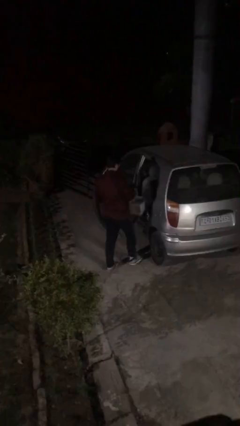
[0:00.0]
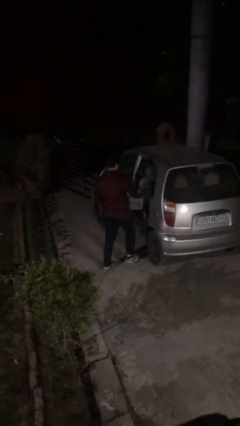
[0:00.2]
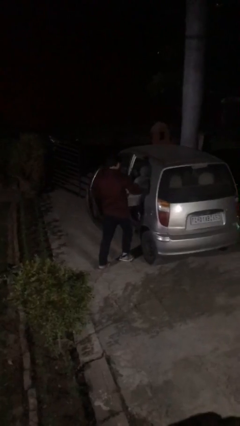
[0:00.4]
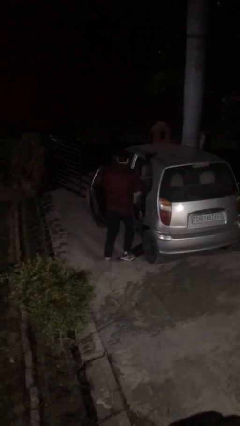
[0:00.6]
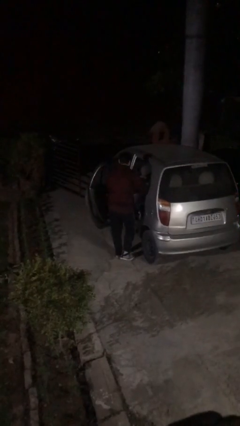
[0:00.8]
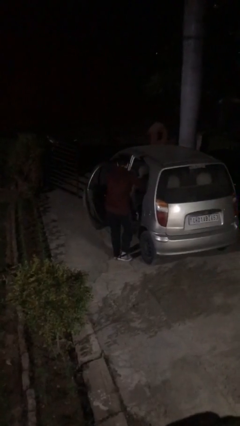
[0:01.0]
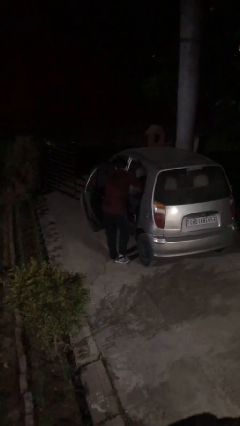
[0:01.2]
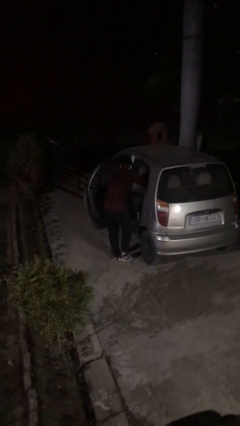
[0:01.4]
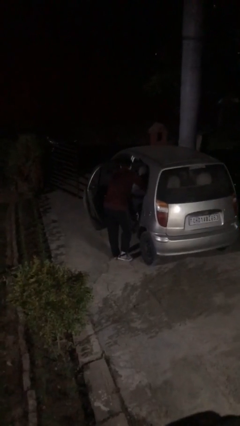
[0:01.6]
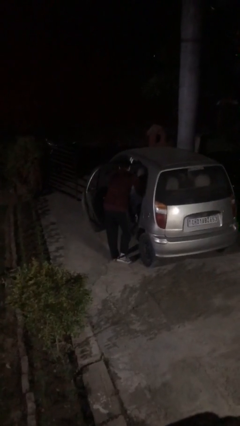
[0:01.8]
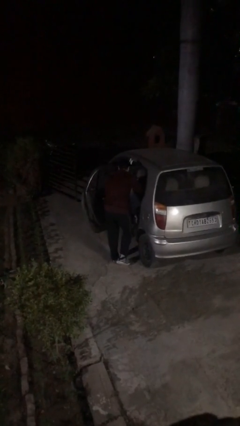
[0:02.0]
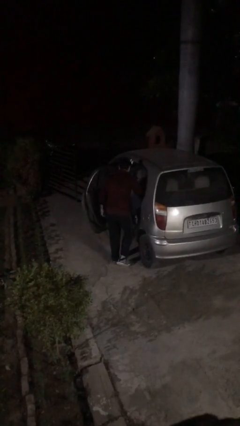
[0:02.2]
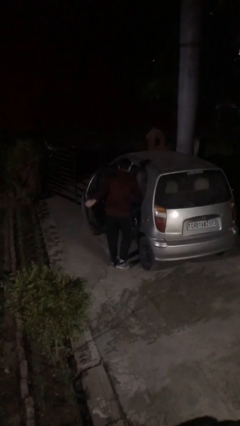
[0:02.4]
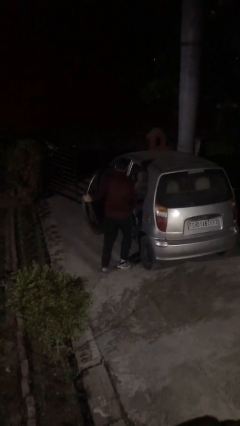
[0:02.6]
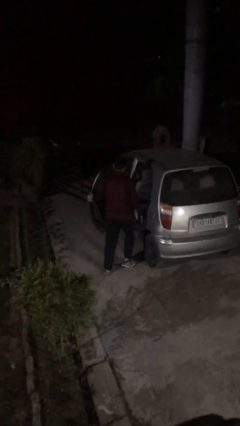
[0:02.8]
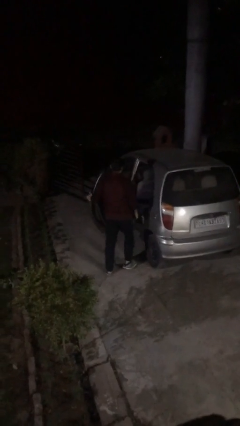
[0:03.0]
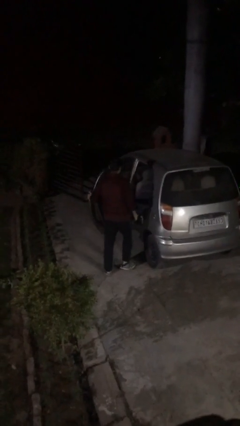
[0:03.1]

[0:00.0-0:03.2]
person loads car

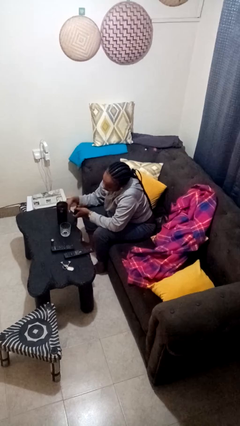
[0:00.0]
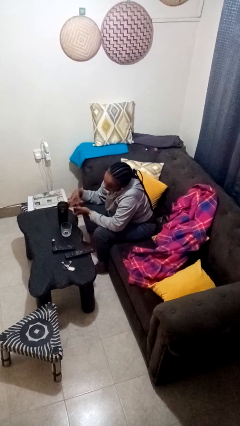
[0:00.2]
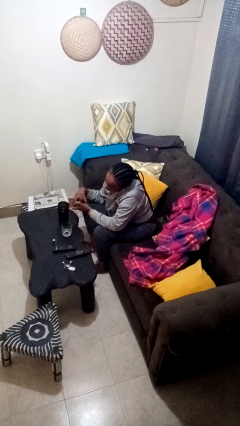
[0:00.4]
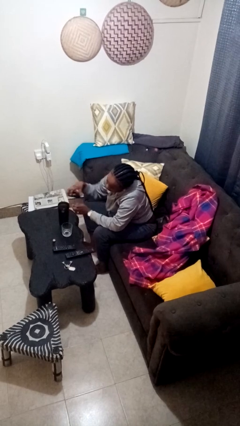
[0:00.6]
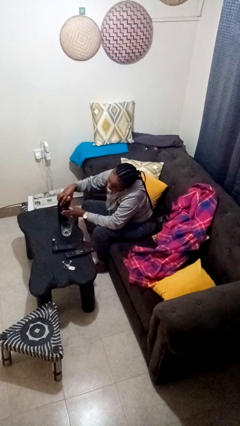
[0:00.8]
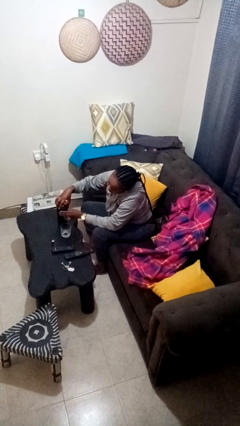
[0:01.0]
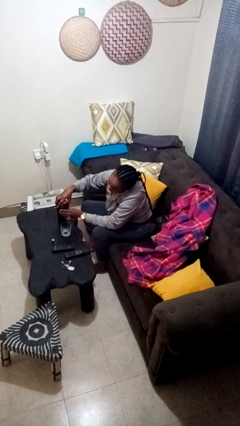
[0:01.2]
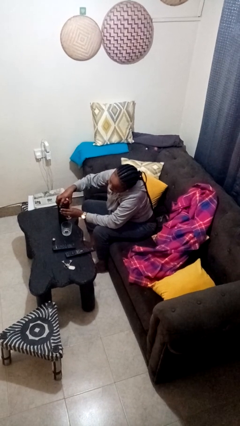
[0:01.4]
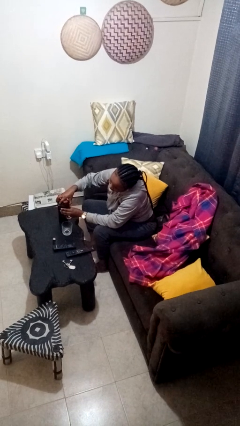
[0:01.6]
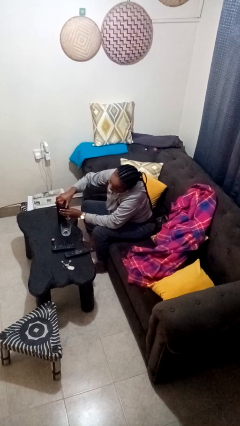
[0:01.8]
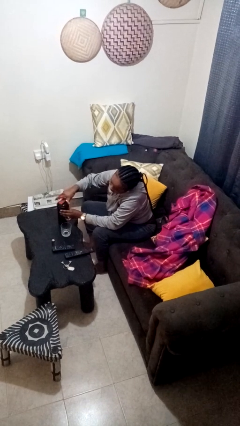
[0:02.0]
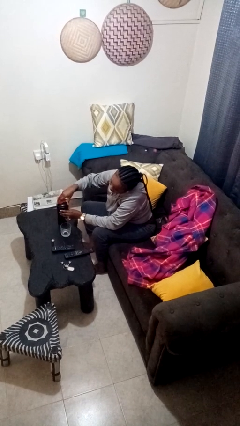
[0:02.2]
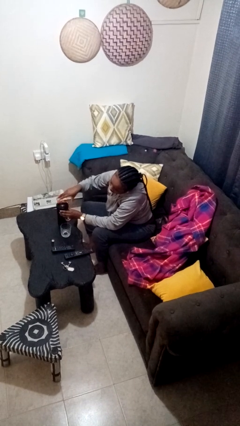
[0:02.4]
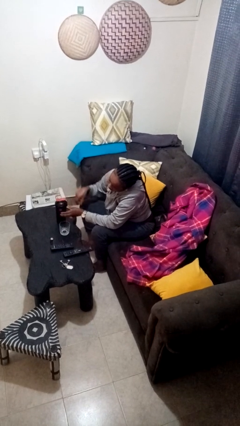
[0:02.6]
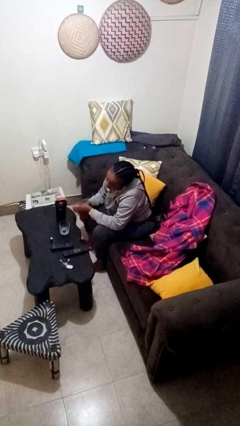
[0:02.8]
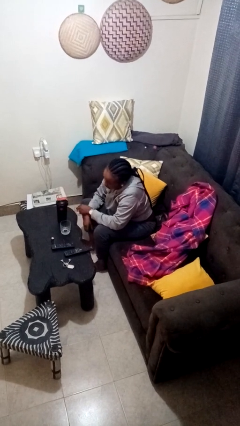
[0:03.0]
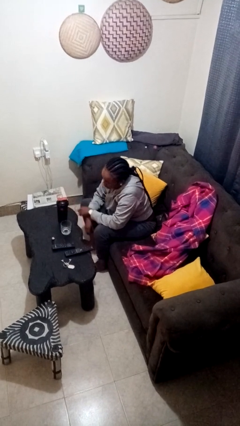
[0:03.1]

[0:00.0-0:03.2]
person screws lid to bottle

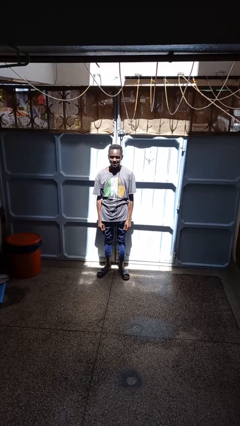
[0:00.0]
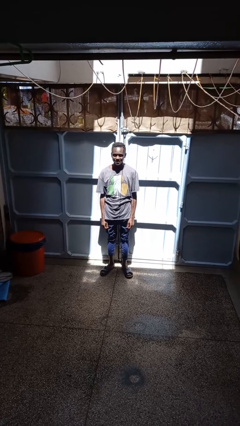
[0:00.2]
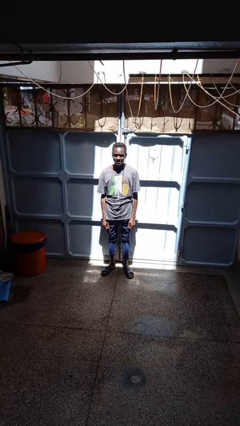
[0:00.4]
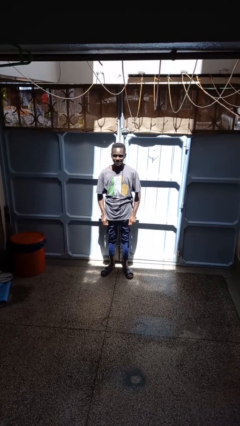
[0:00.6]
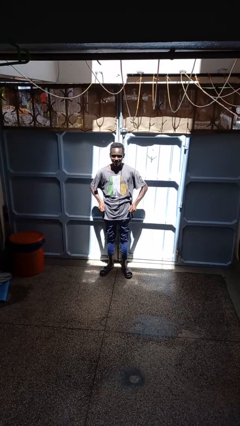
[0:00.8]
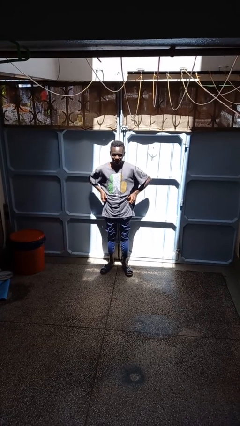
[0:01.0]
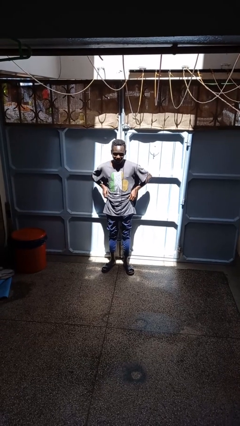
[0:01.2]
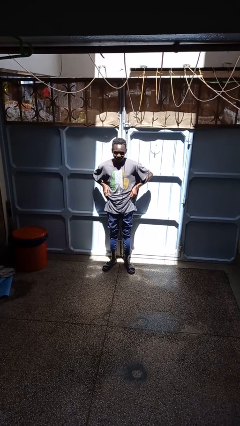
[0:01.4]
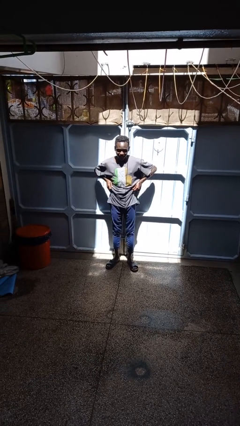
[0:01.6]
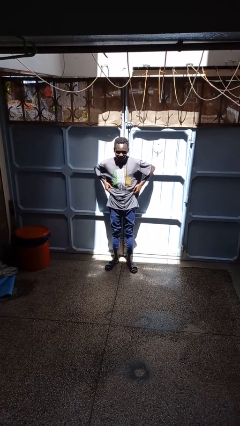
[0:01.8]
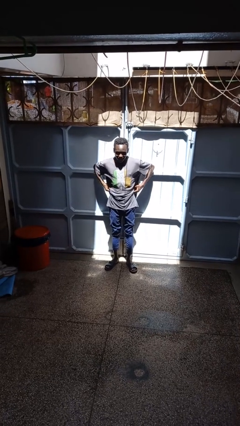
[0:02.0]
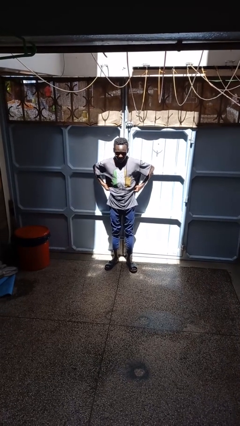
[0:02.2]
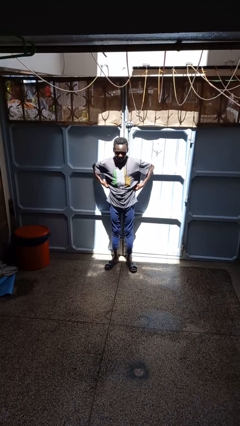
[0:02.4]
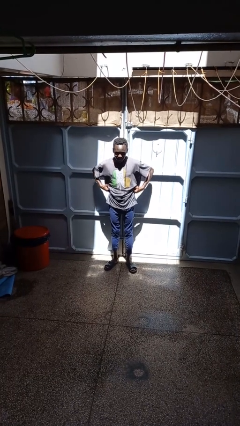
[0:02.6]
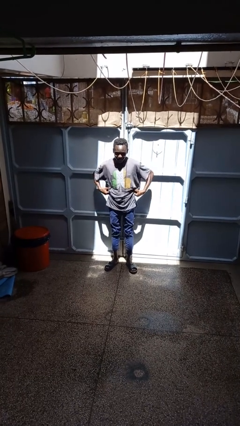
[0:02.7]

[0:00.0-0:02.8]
person hikes up pants

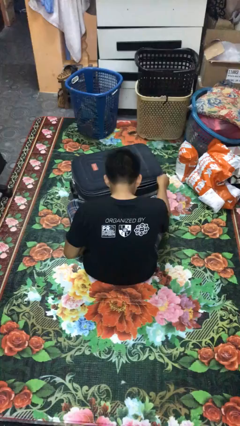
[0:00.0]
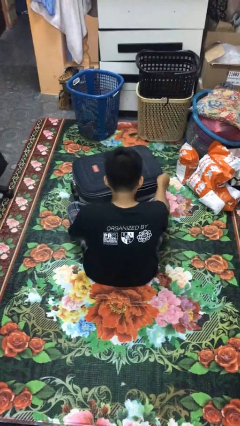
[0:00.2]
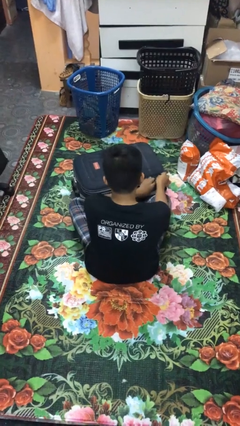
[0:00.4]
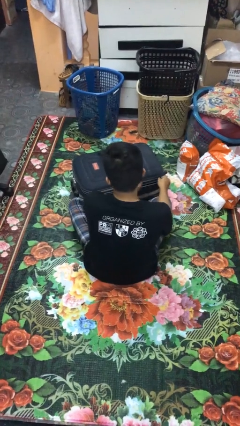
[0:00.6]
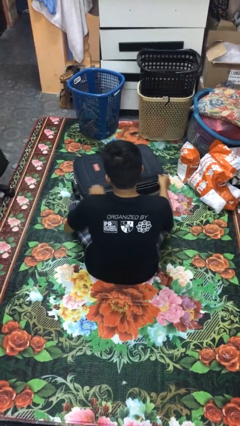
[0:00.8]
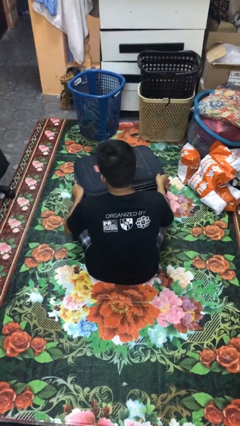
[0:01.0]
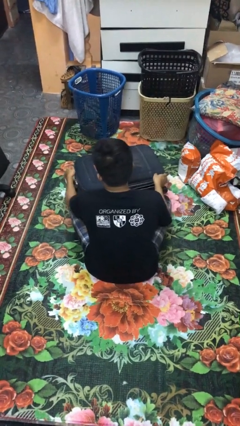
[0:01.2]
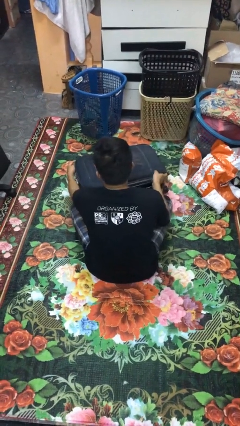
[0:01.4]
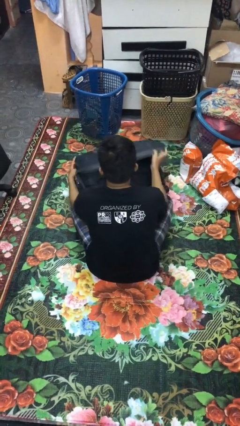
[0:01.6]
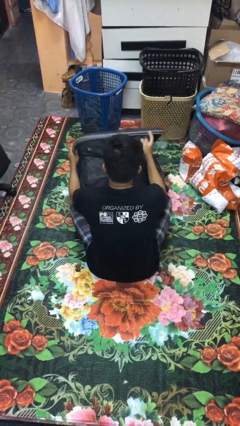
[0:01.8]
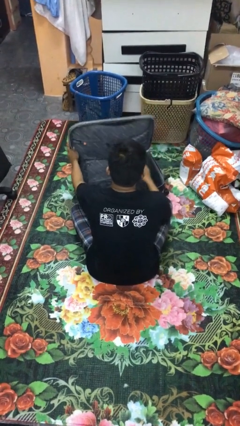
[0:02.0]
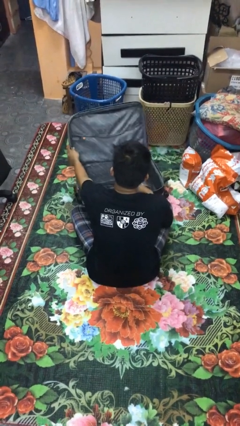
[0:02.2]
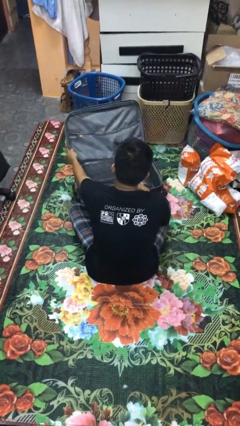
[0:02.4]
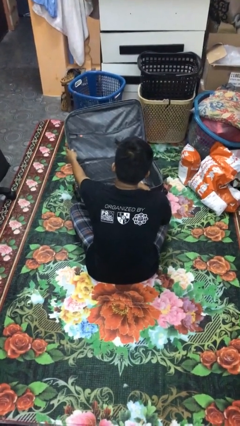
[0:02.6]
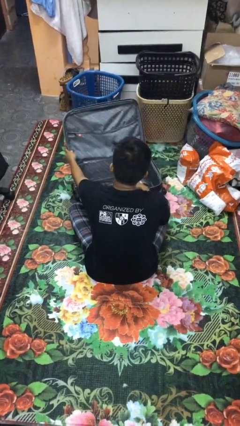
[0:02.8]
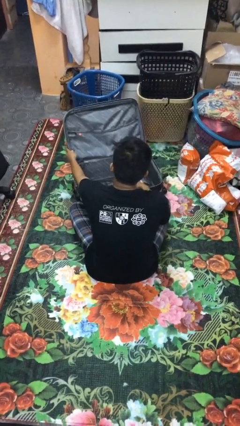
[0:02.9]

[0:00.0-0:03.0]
person opens suitcase

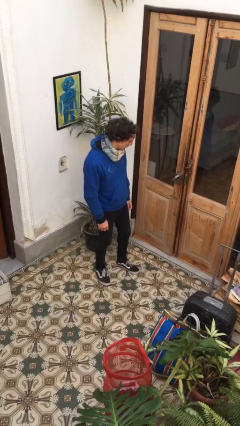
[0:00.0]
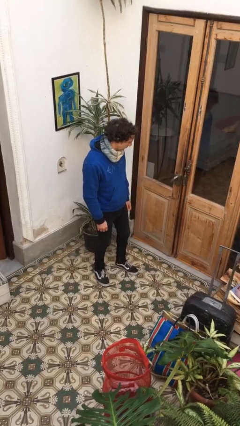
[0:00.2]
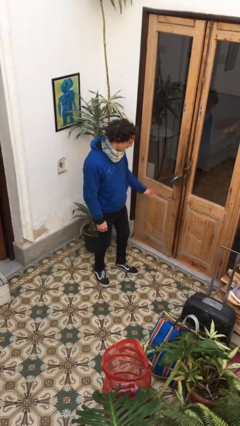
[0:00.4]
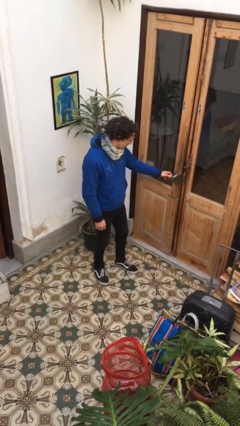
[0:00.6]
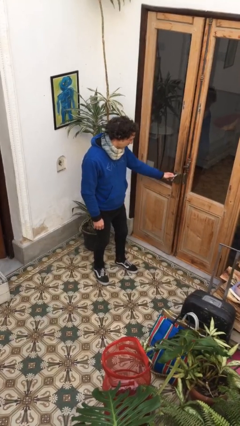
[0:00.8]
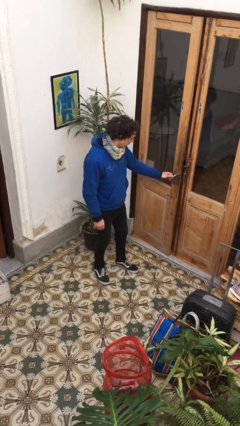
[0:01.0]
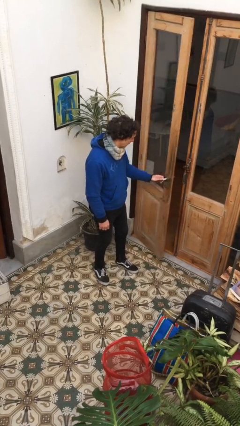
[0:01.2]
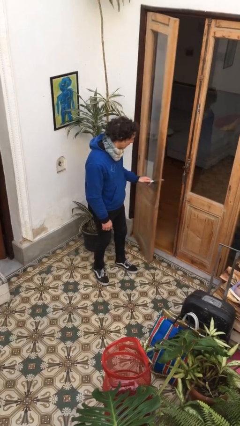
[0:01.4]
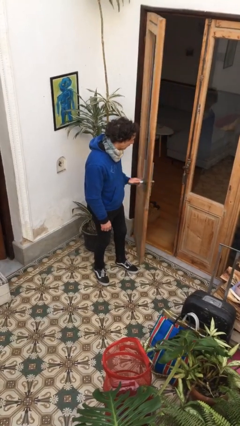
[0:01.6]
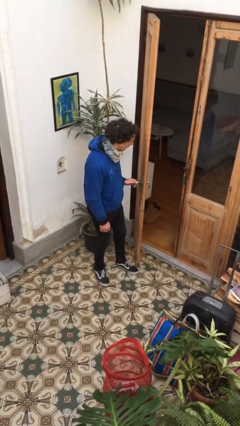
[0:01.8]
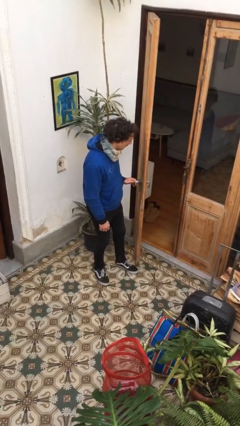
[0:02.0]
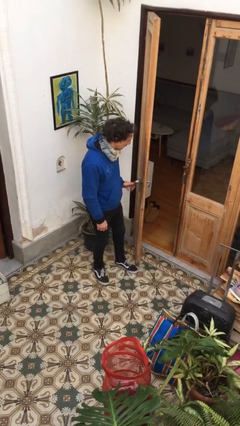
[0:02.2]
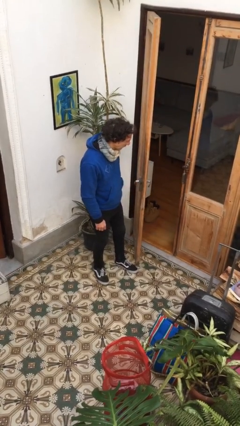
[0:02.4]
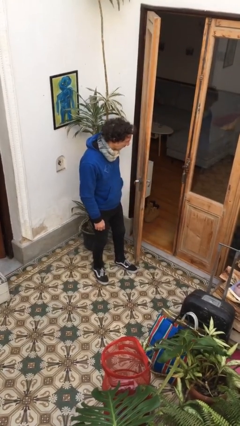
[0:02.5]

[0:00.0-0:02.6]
person opens facility door

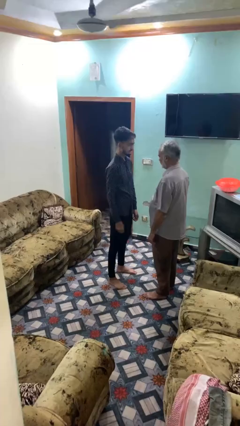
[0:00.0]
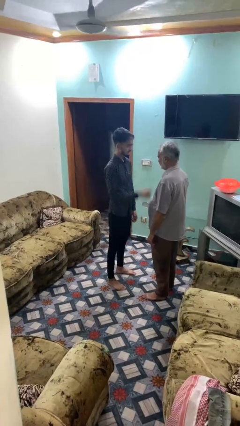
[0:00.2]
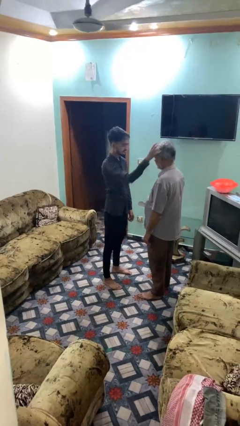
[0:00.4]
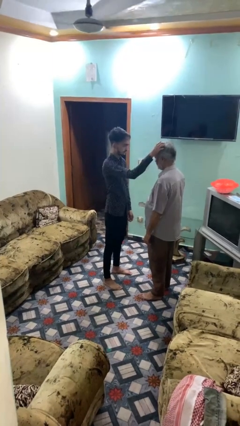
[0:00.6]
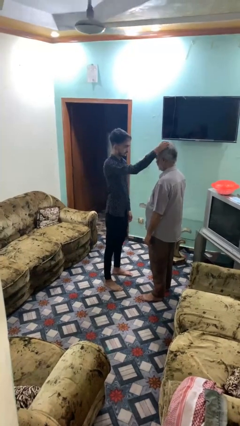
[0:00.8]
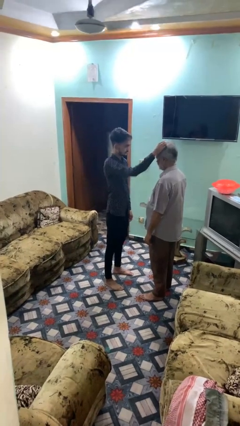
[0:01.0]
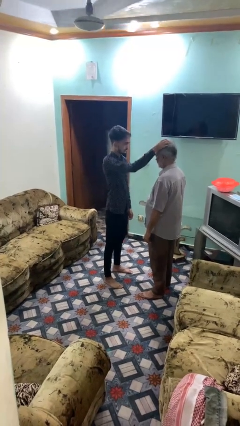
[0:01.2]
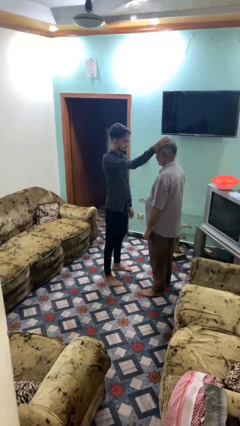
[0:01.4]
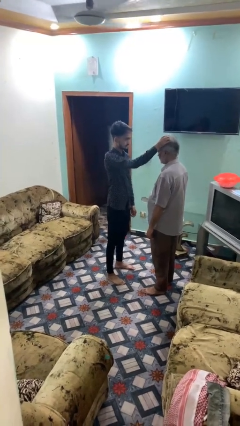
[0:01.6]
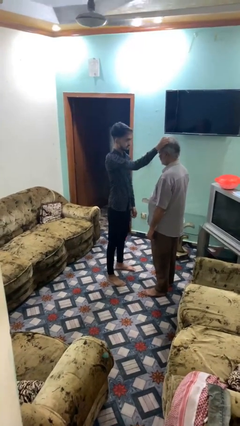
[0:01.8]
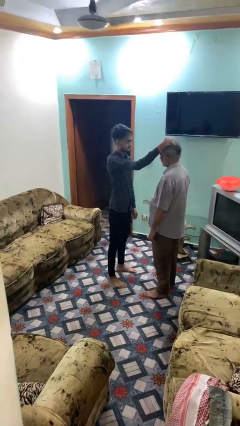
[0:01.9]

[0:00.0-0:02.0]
person grabs person by hair

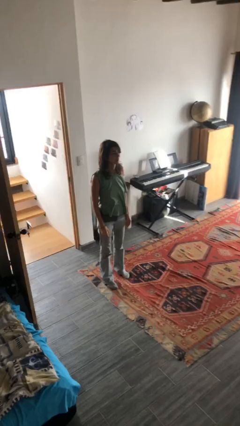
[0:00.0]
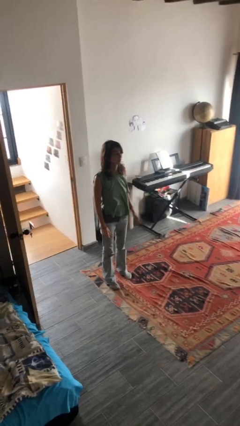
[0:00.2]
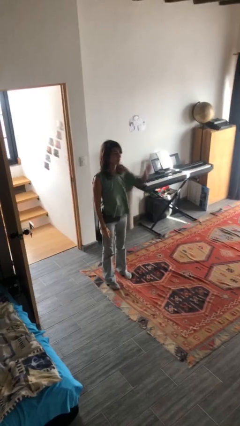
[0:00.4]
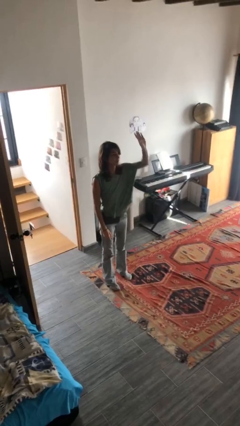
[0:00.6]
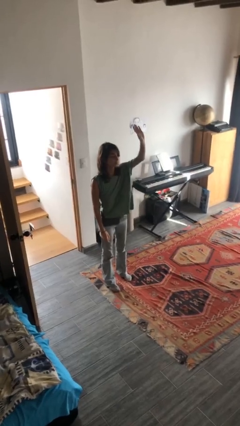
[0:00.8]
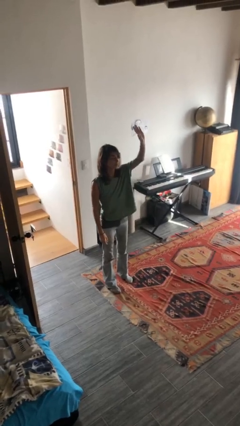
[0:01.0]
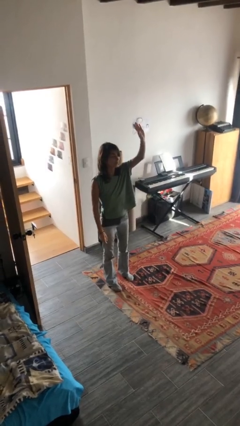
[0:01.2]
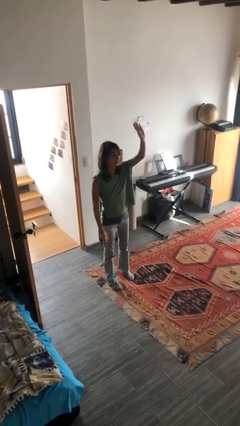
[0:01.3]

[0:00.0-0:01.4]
person gestures raise hand
